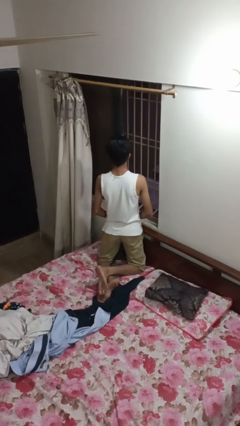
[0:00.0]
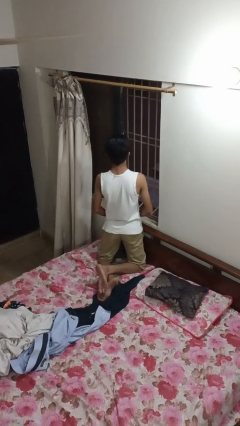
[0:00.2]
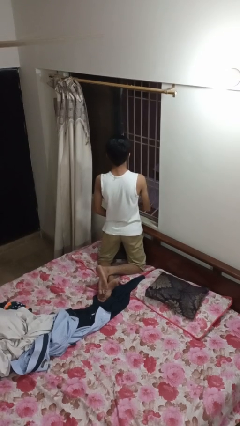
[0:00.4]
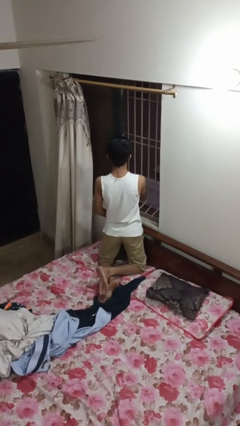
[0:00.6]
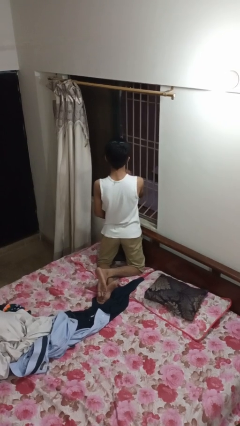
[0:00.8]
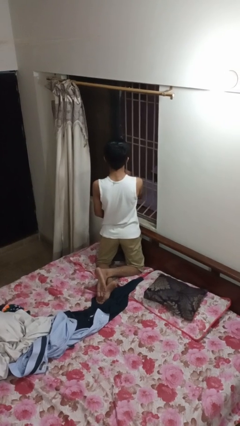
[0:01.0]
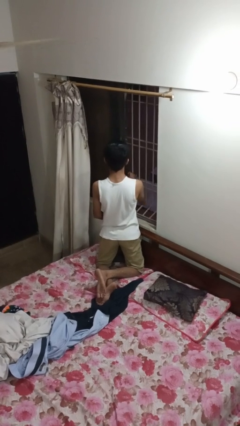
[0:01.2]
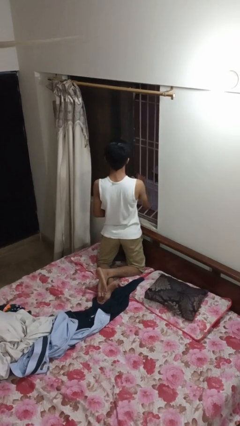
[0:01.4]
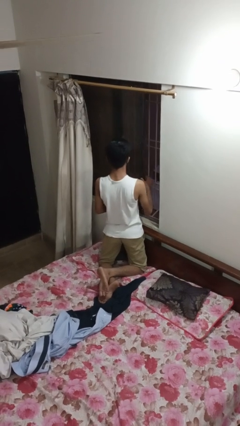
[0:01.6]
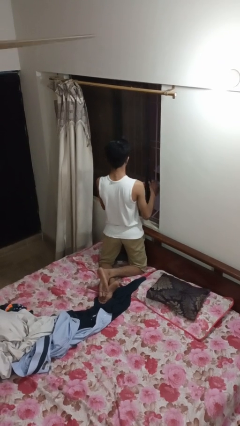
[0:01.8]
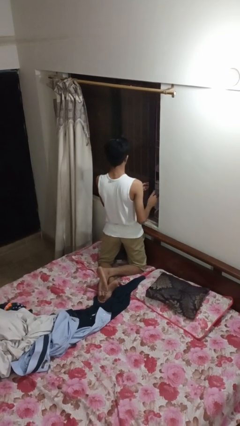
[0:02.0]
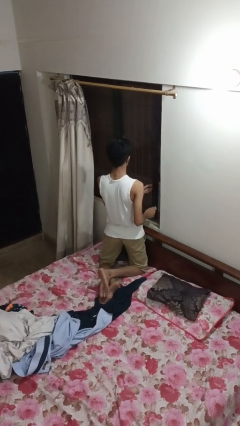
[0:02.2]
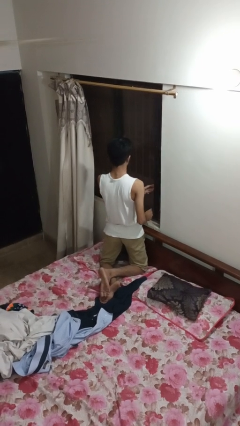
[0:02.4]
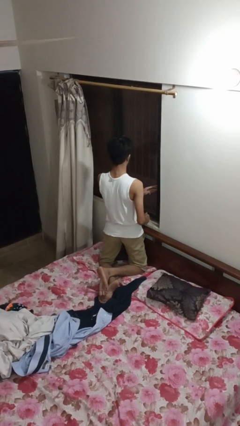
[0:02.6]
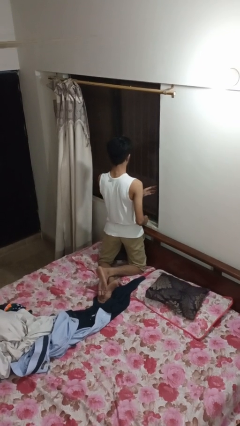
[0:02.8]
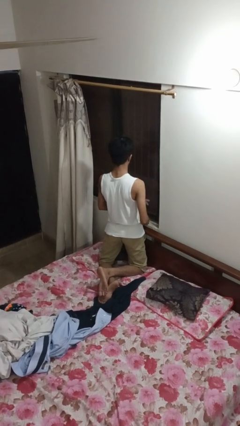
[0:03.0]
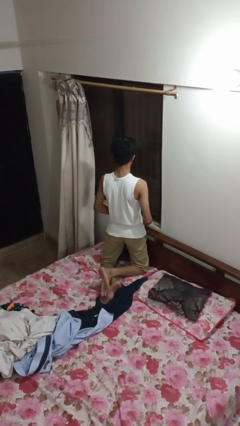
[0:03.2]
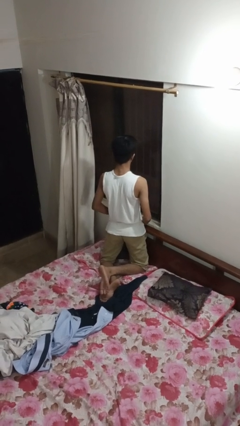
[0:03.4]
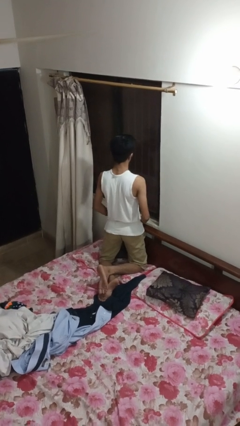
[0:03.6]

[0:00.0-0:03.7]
person closes home window

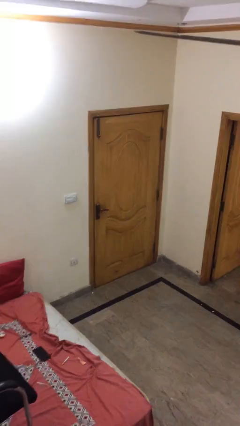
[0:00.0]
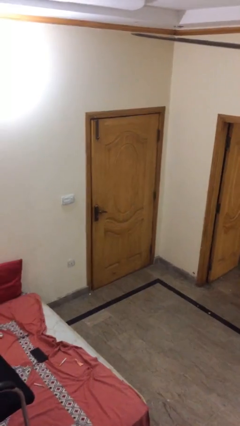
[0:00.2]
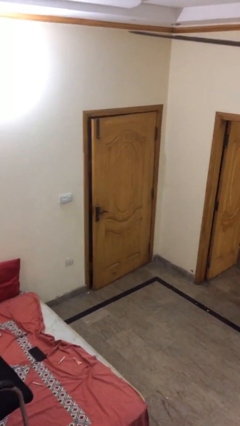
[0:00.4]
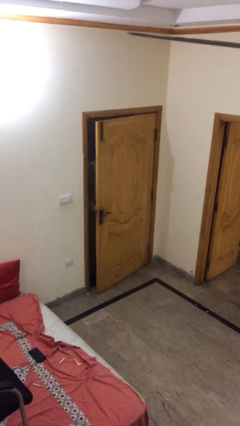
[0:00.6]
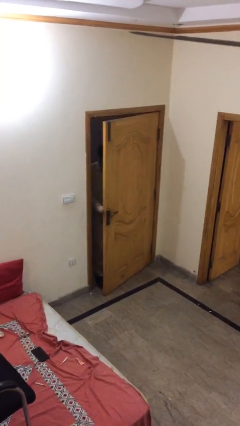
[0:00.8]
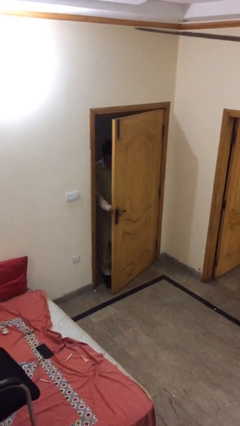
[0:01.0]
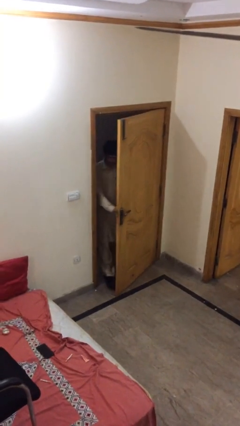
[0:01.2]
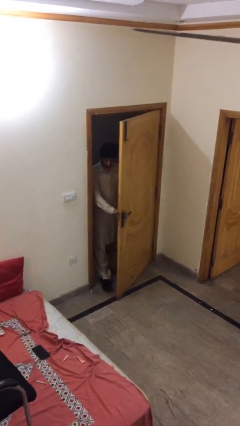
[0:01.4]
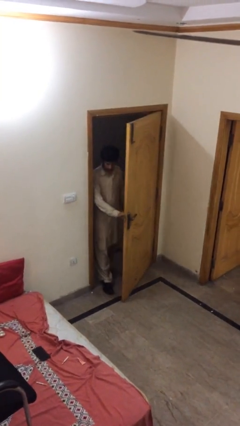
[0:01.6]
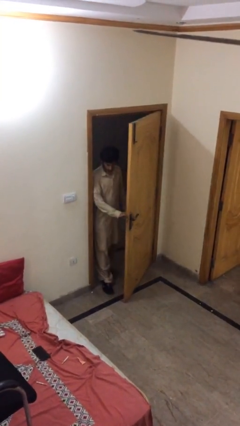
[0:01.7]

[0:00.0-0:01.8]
person opens facility door

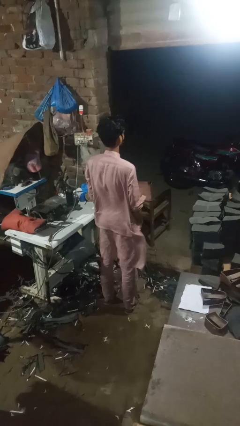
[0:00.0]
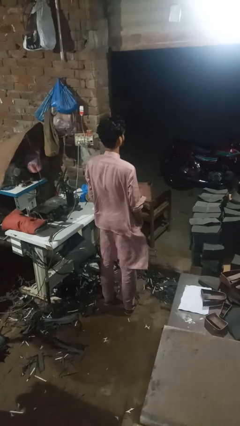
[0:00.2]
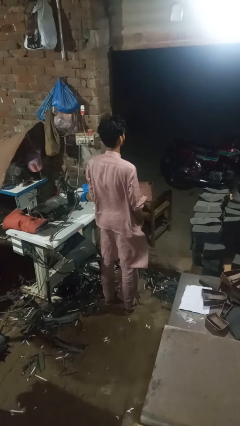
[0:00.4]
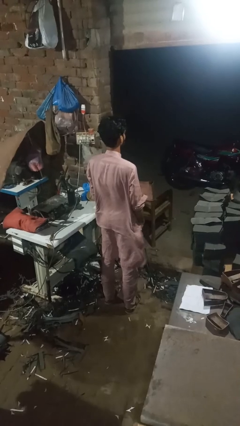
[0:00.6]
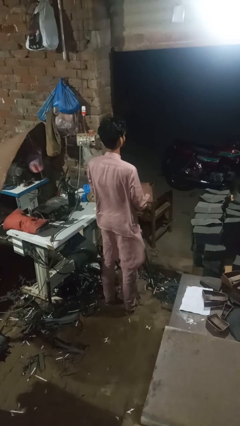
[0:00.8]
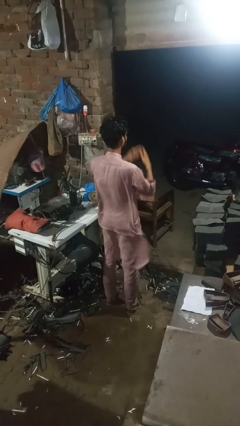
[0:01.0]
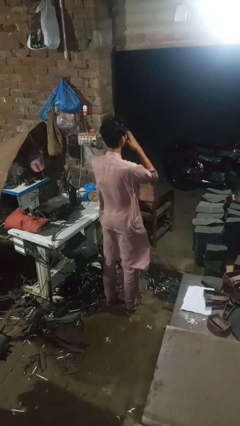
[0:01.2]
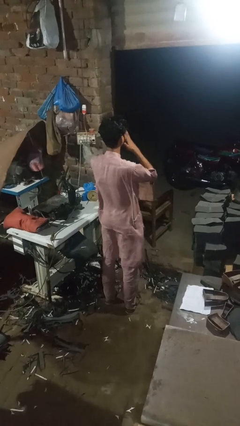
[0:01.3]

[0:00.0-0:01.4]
person sneezes into hand

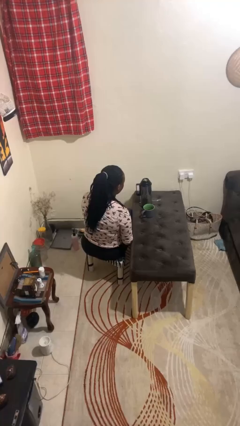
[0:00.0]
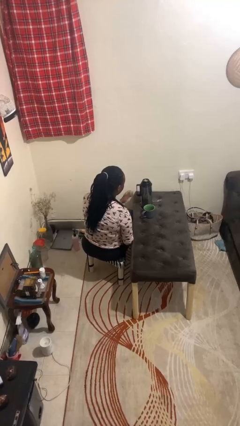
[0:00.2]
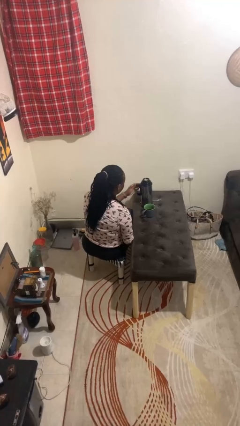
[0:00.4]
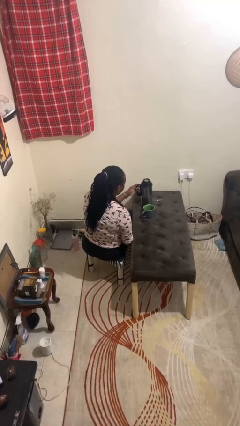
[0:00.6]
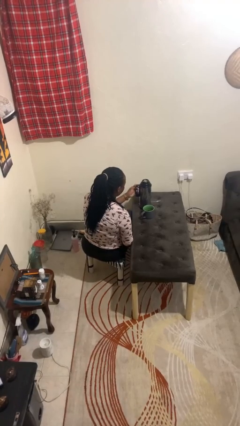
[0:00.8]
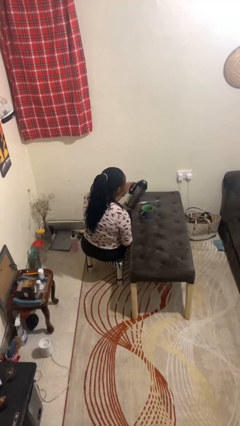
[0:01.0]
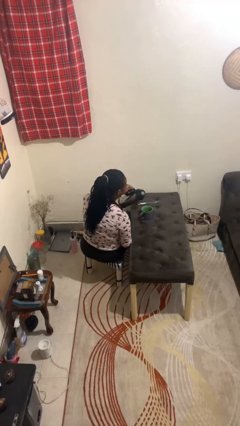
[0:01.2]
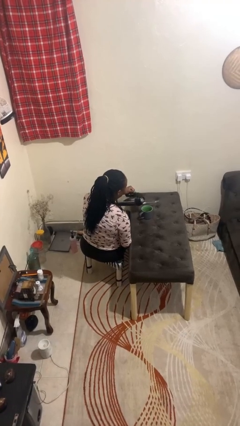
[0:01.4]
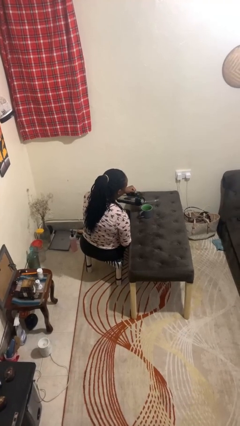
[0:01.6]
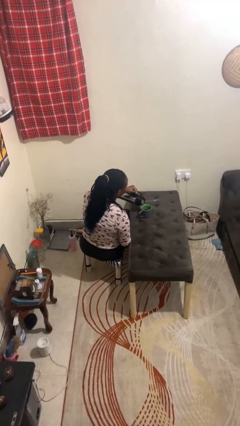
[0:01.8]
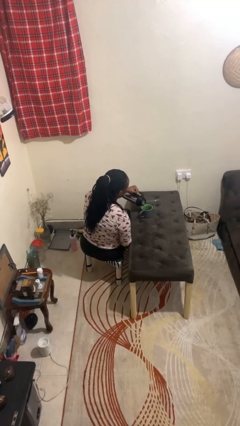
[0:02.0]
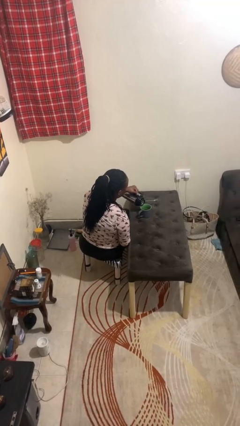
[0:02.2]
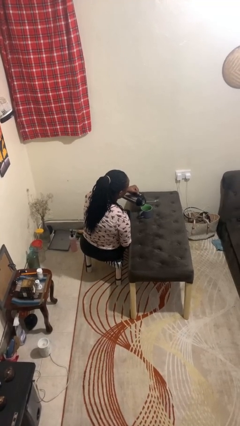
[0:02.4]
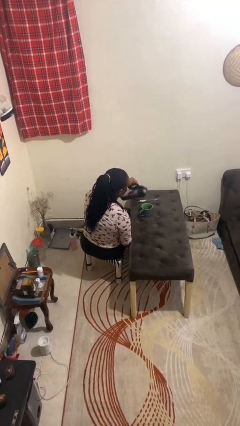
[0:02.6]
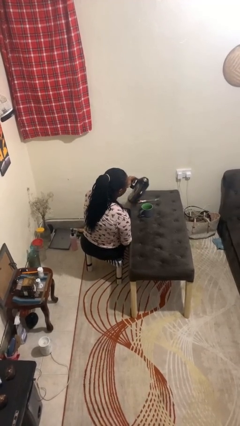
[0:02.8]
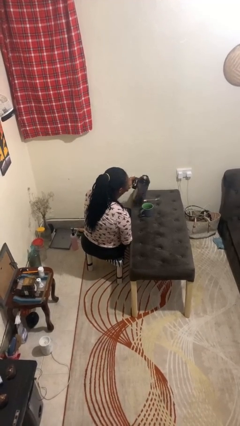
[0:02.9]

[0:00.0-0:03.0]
person pours coffee into mug

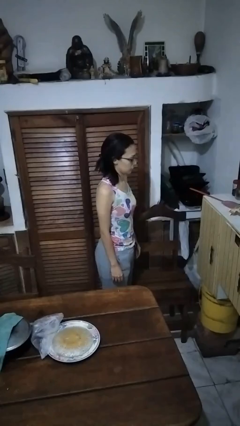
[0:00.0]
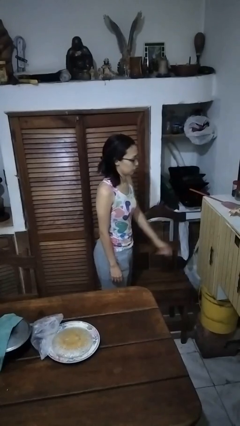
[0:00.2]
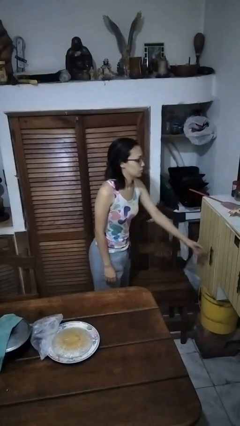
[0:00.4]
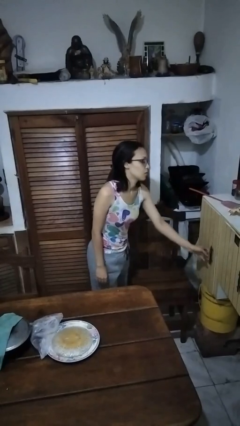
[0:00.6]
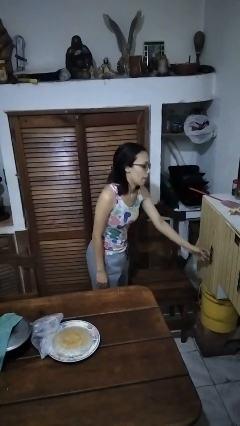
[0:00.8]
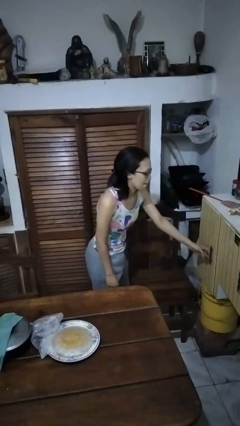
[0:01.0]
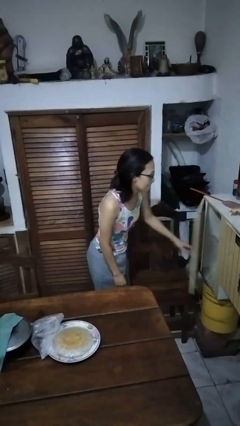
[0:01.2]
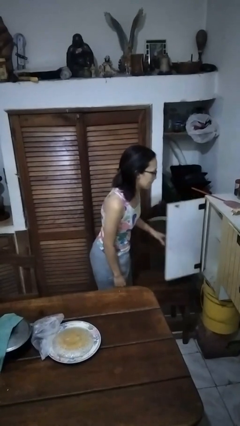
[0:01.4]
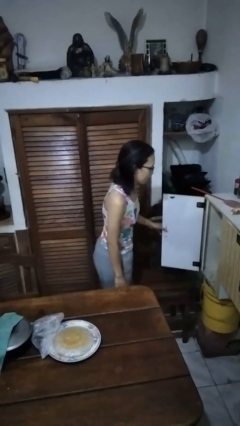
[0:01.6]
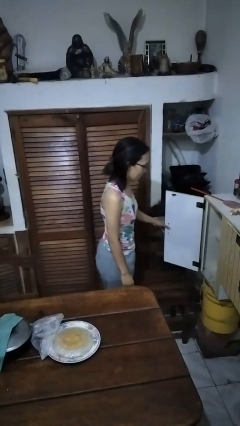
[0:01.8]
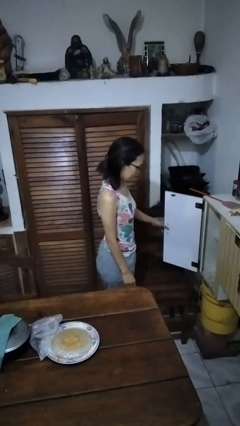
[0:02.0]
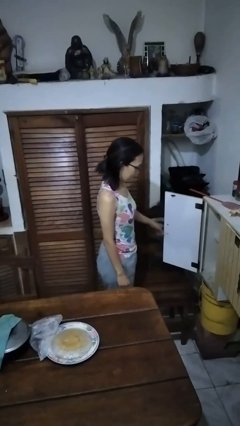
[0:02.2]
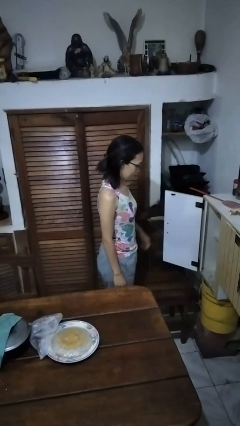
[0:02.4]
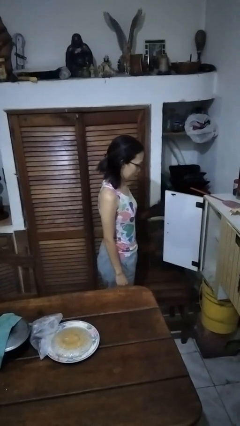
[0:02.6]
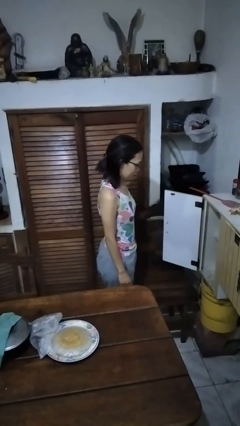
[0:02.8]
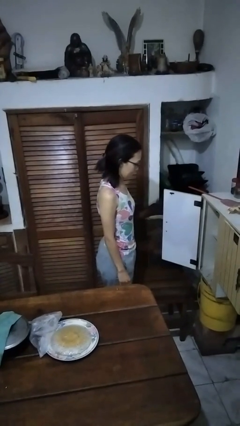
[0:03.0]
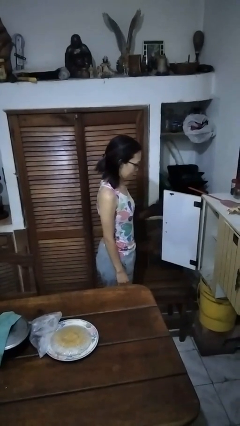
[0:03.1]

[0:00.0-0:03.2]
person opens cabinet

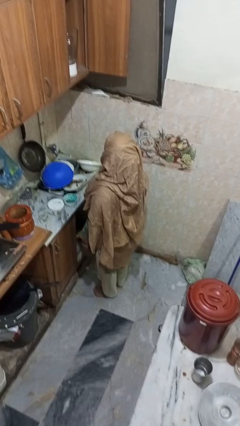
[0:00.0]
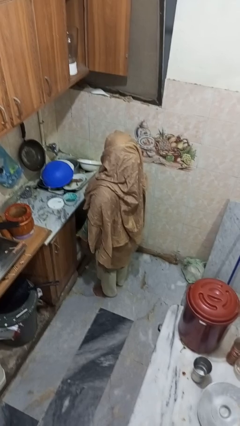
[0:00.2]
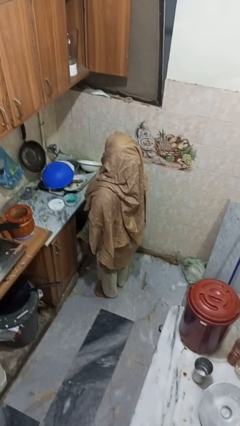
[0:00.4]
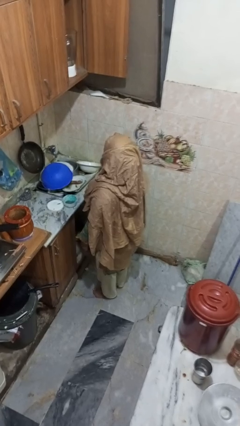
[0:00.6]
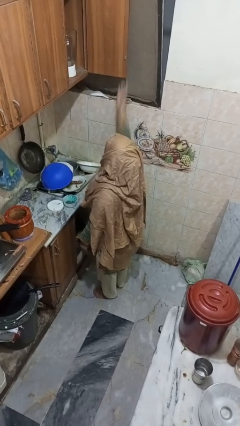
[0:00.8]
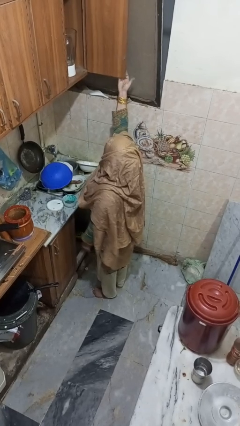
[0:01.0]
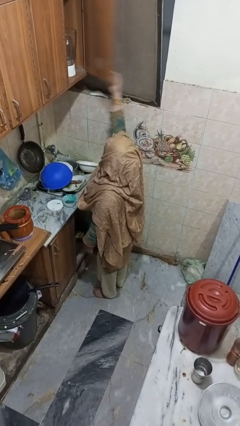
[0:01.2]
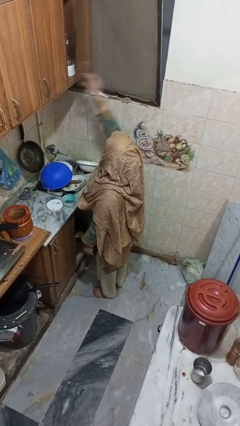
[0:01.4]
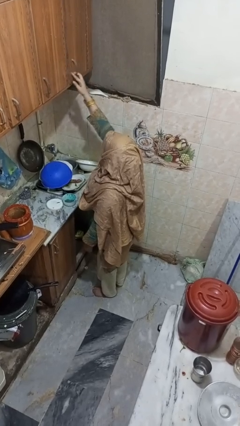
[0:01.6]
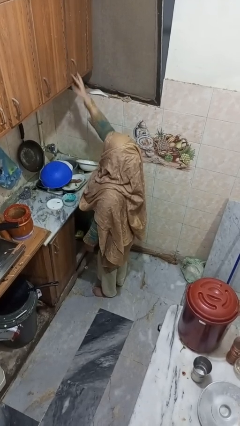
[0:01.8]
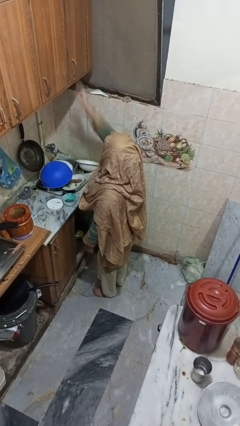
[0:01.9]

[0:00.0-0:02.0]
person closes cabinet

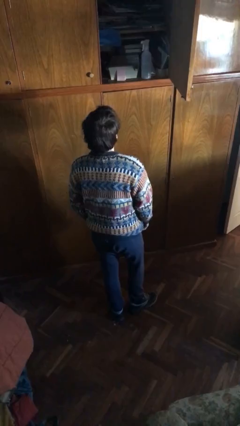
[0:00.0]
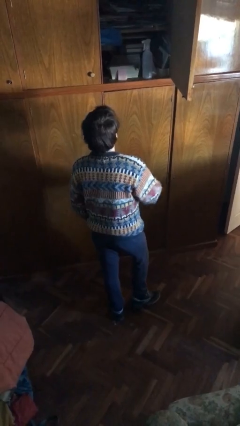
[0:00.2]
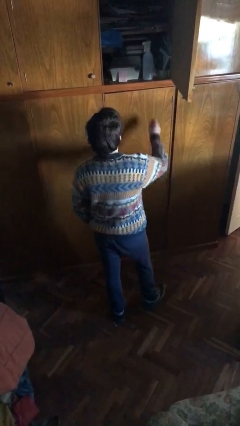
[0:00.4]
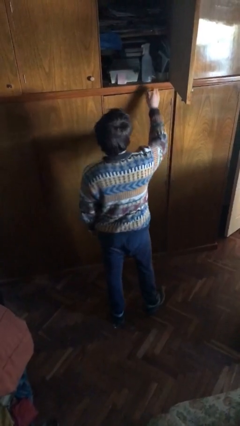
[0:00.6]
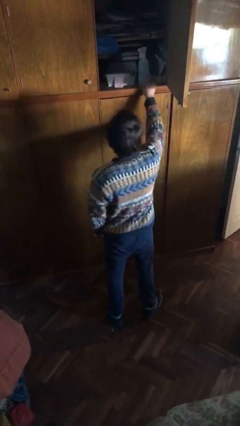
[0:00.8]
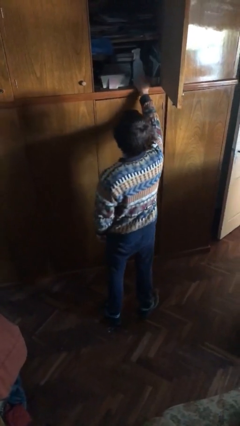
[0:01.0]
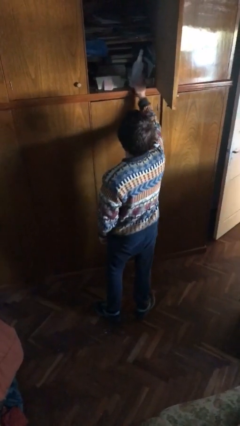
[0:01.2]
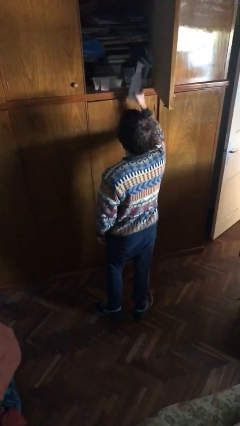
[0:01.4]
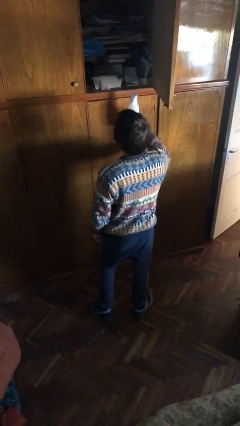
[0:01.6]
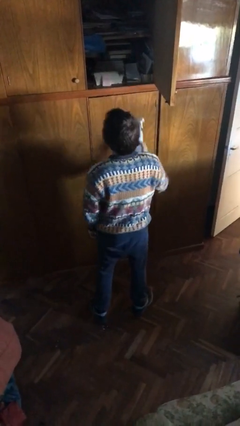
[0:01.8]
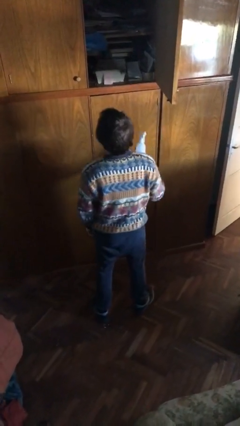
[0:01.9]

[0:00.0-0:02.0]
person picks up object from cabinet
